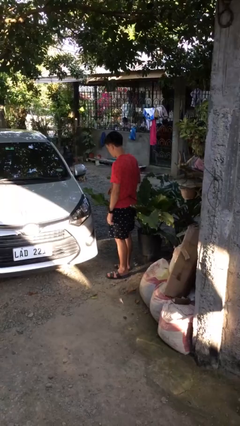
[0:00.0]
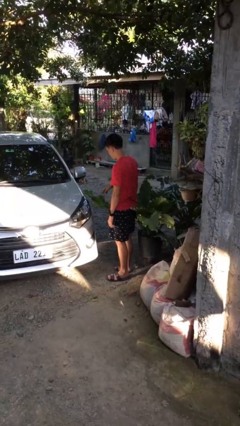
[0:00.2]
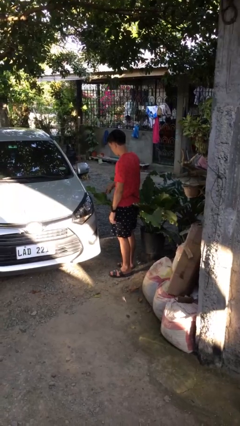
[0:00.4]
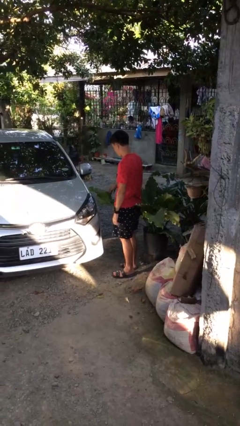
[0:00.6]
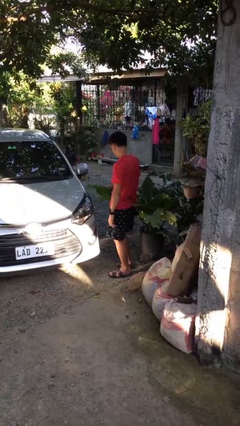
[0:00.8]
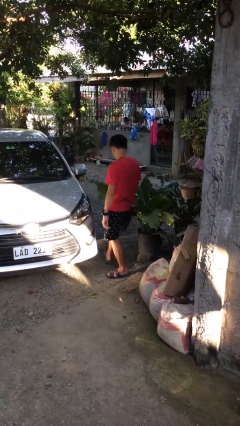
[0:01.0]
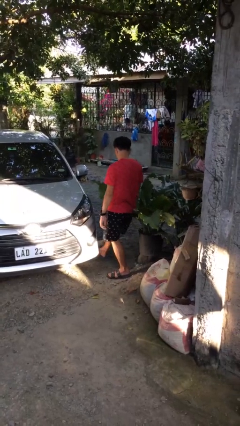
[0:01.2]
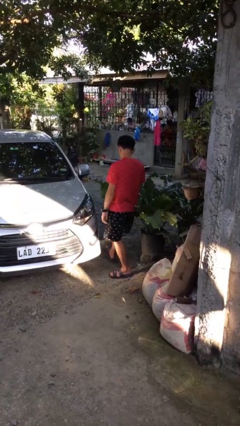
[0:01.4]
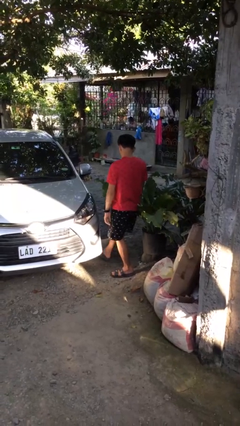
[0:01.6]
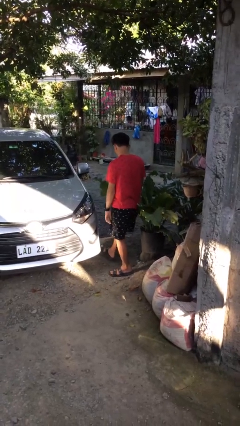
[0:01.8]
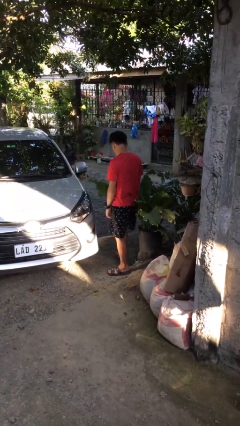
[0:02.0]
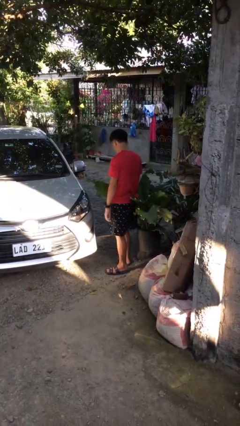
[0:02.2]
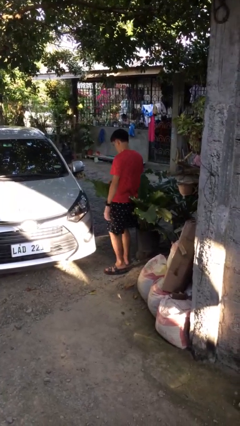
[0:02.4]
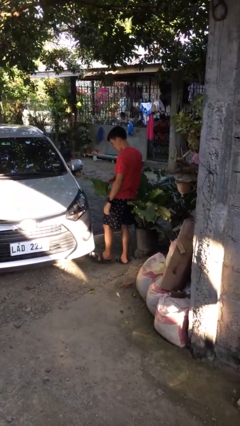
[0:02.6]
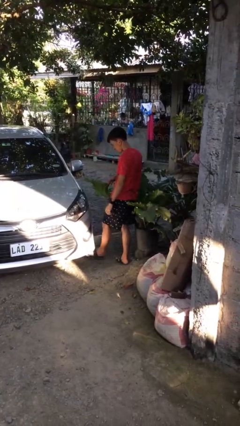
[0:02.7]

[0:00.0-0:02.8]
person kicks car tires

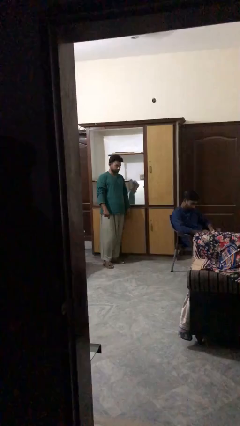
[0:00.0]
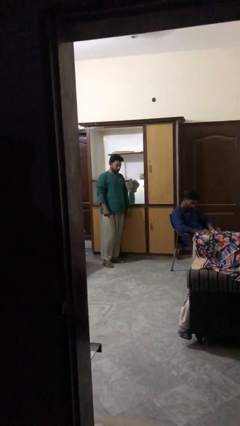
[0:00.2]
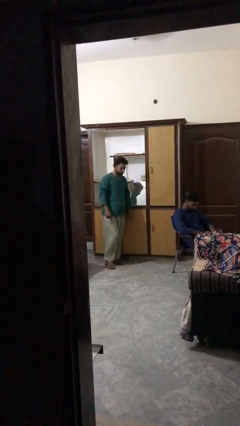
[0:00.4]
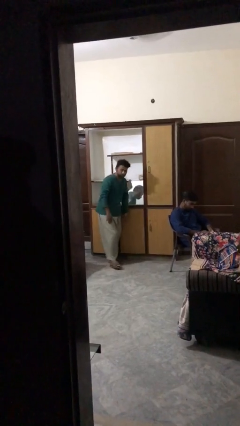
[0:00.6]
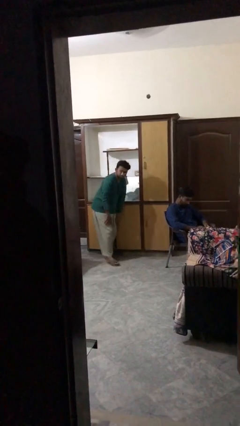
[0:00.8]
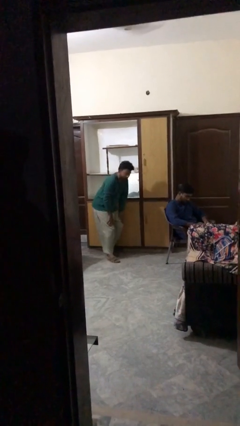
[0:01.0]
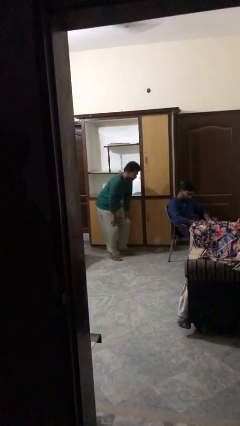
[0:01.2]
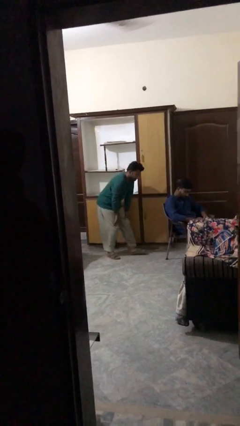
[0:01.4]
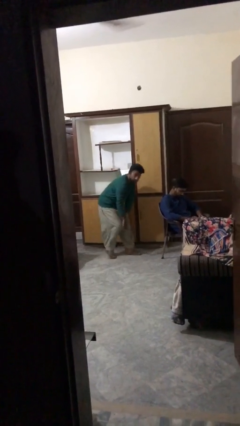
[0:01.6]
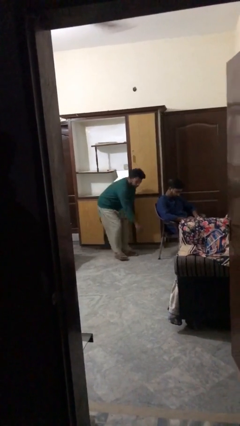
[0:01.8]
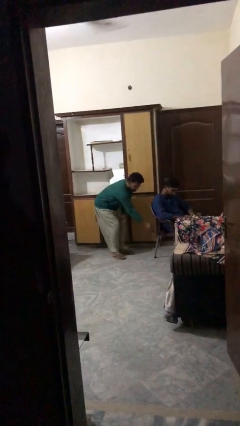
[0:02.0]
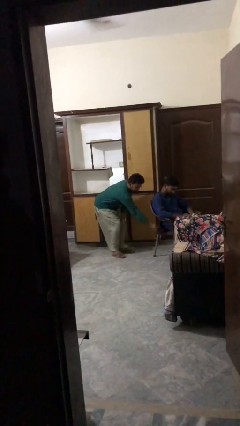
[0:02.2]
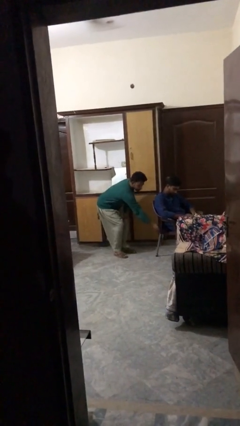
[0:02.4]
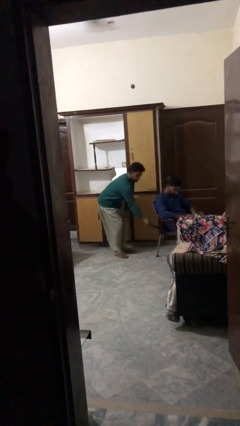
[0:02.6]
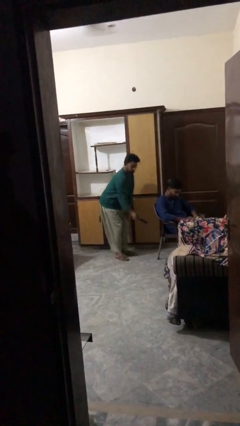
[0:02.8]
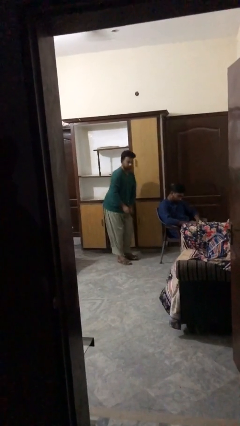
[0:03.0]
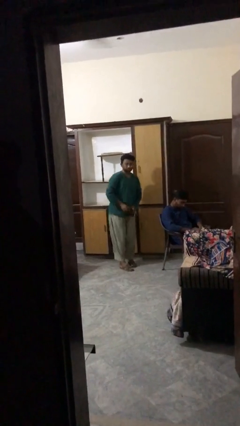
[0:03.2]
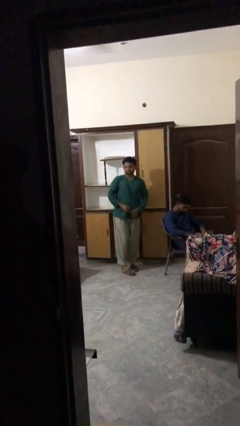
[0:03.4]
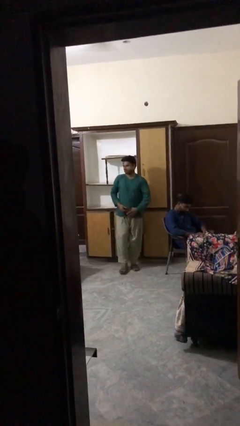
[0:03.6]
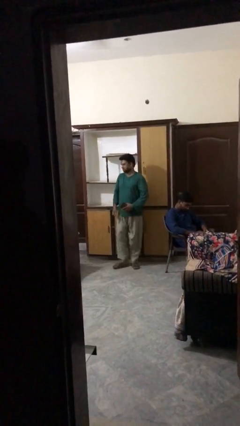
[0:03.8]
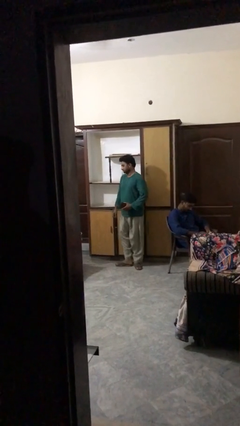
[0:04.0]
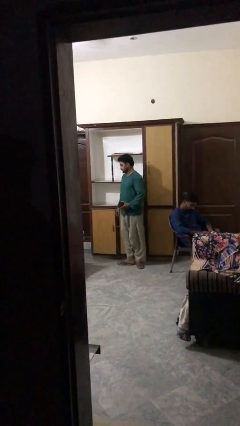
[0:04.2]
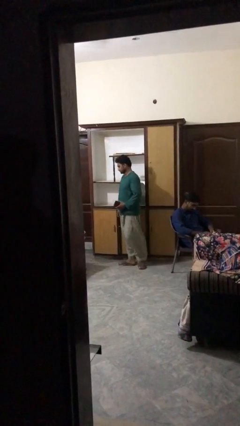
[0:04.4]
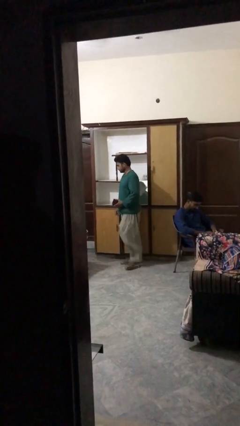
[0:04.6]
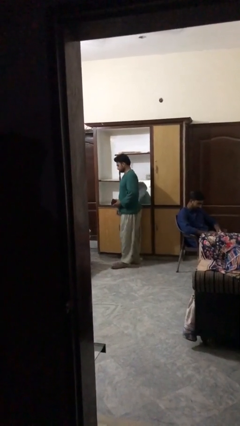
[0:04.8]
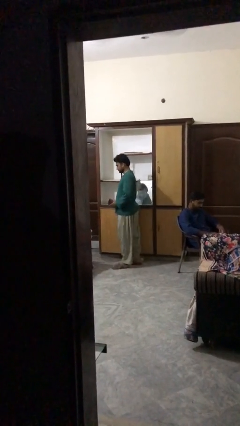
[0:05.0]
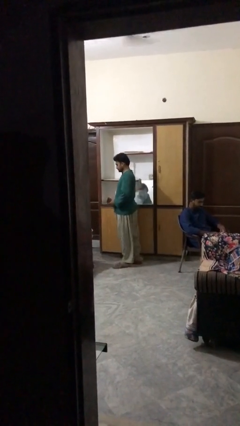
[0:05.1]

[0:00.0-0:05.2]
person steals object from person

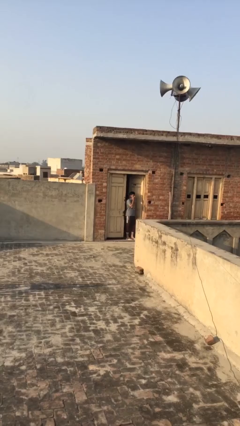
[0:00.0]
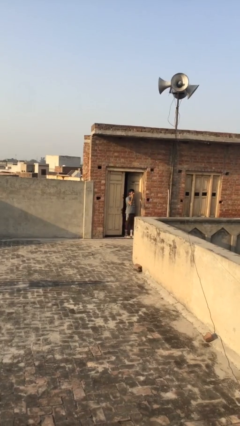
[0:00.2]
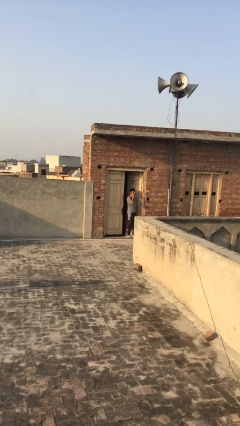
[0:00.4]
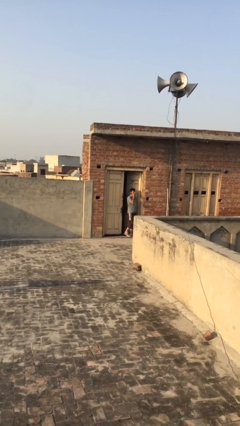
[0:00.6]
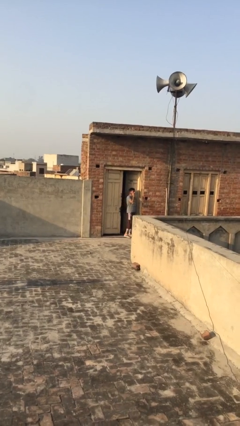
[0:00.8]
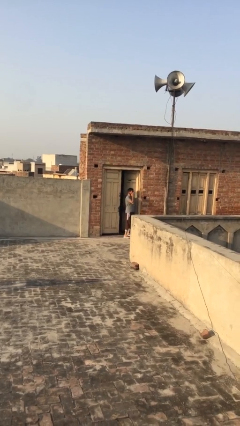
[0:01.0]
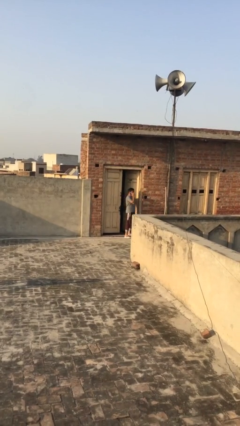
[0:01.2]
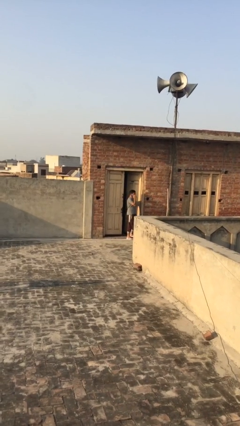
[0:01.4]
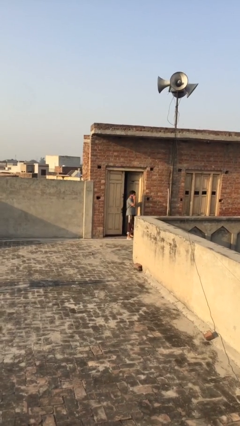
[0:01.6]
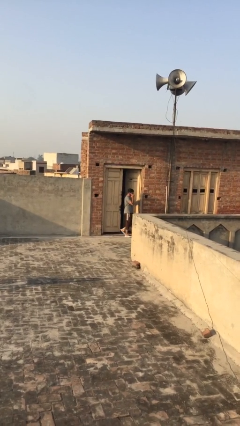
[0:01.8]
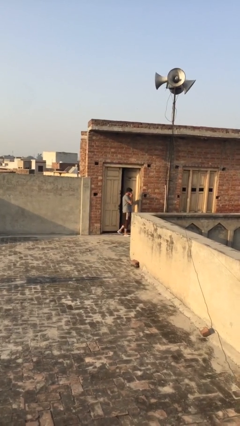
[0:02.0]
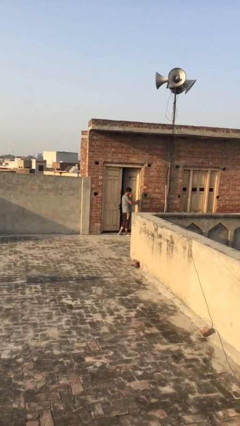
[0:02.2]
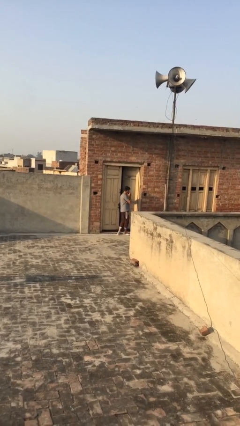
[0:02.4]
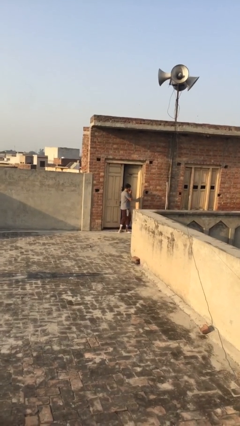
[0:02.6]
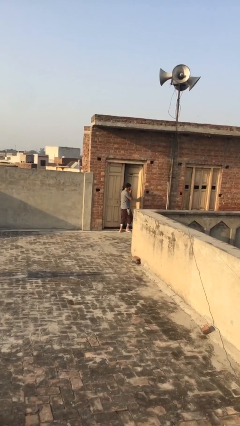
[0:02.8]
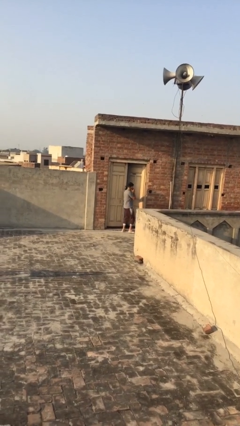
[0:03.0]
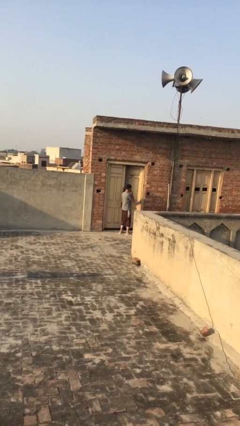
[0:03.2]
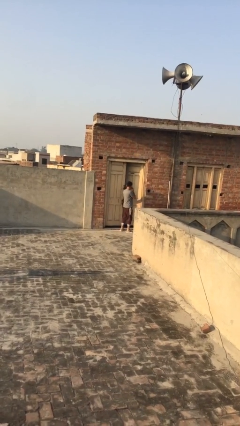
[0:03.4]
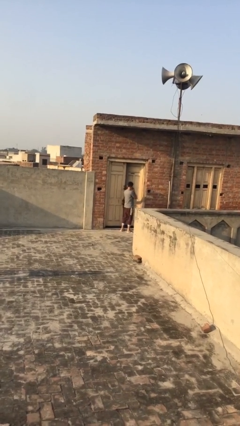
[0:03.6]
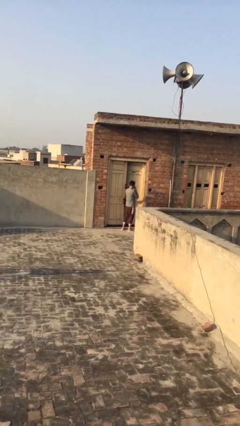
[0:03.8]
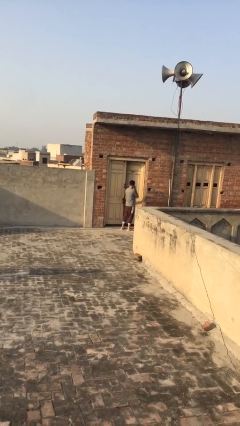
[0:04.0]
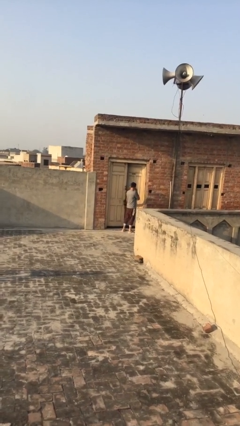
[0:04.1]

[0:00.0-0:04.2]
person enters scene through structure
